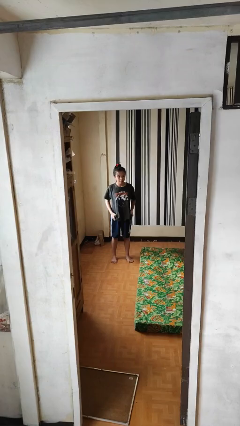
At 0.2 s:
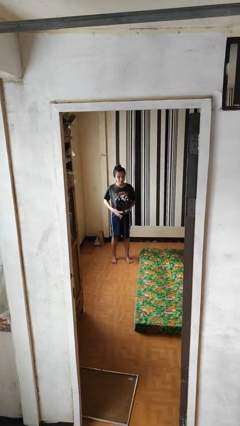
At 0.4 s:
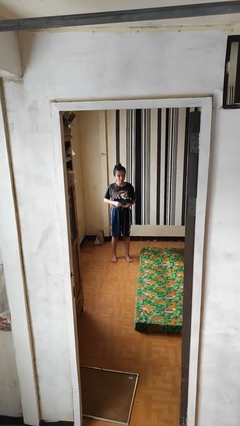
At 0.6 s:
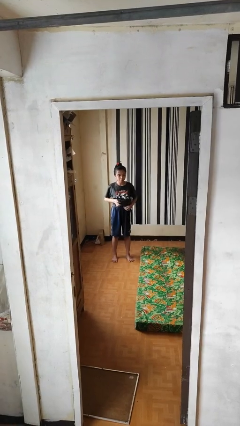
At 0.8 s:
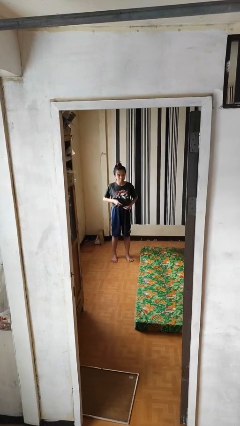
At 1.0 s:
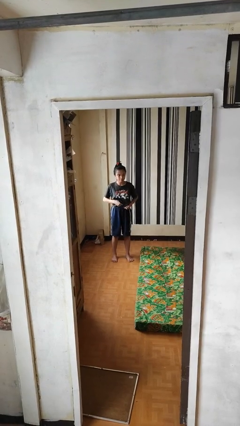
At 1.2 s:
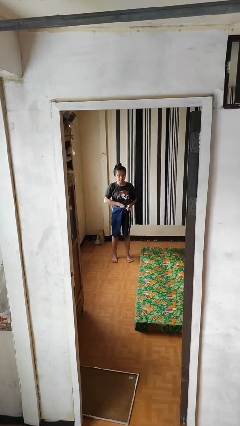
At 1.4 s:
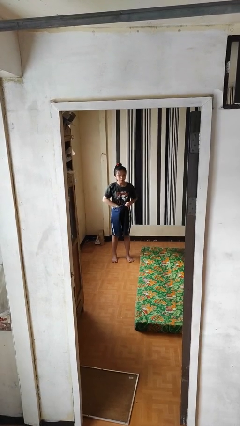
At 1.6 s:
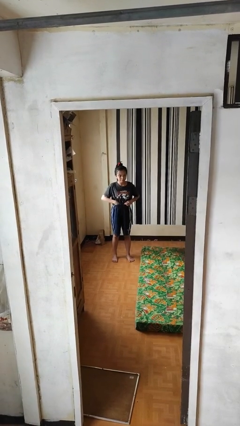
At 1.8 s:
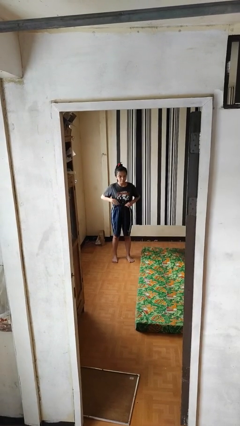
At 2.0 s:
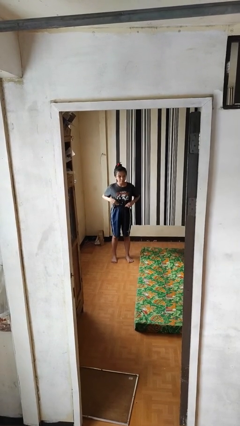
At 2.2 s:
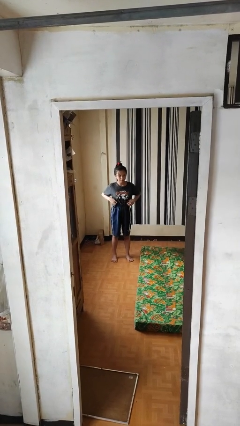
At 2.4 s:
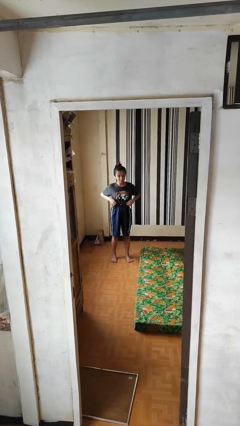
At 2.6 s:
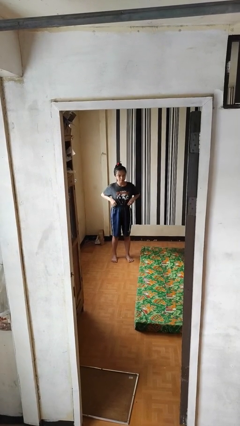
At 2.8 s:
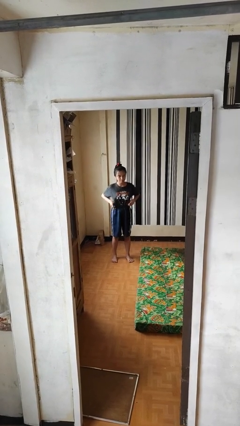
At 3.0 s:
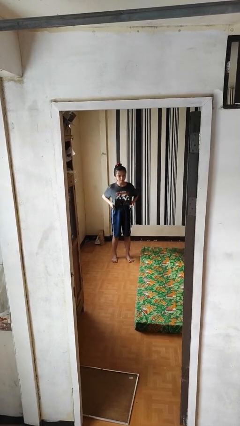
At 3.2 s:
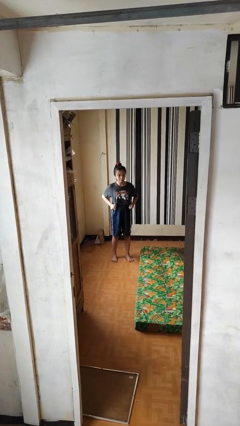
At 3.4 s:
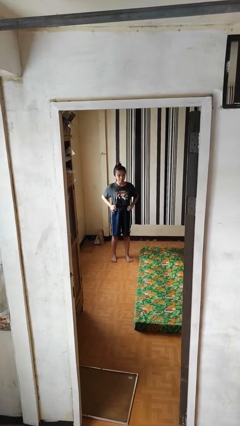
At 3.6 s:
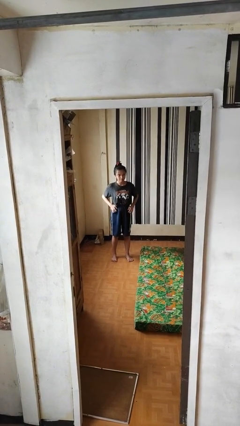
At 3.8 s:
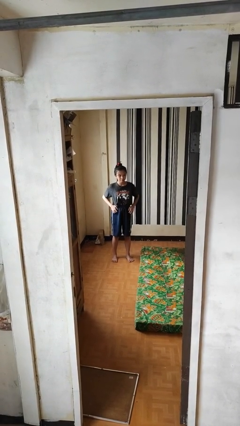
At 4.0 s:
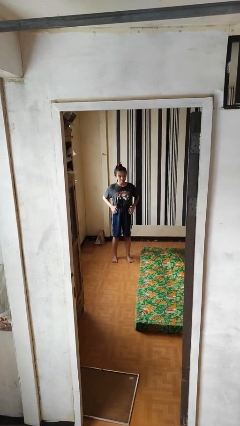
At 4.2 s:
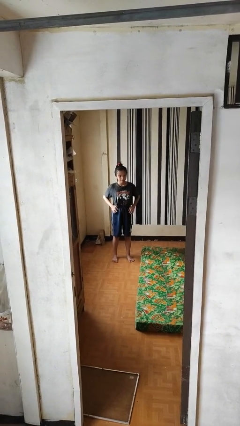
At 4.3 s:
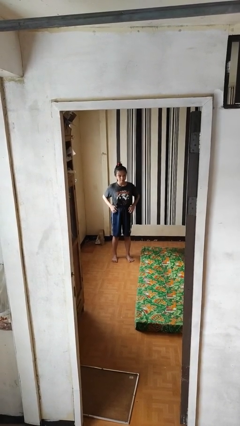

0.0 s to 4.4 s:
person tucks in shirt

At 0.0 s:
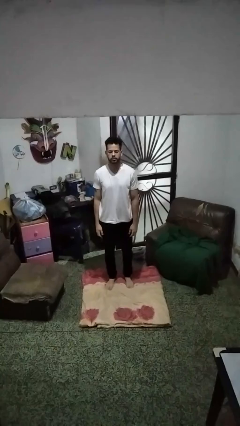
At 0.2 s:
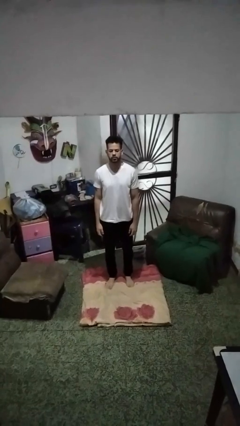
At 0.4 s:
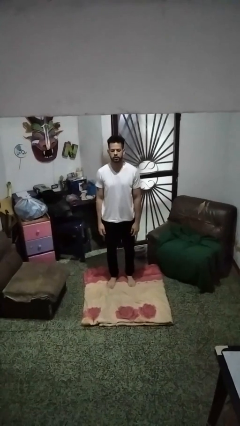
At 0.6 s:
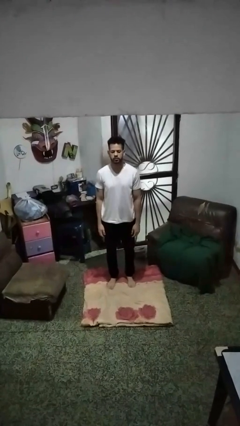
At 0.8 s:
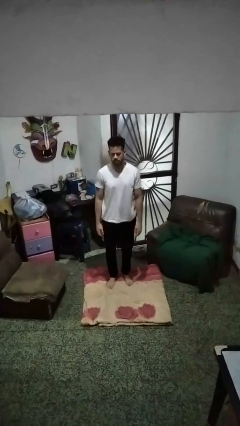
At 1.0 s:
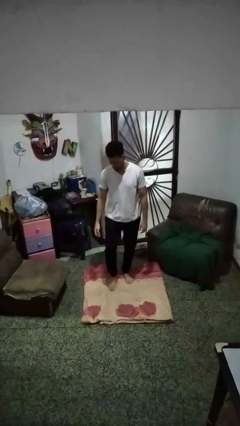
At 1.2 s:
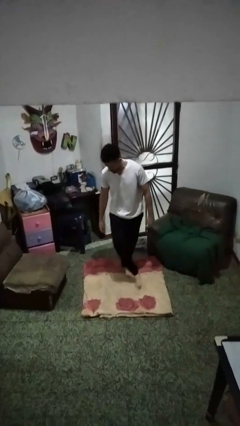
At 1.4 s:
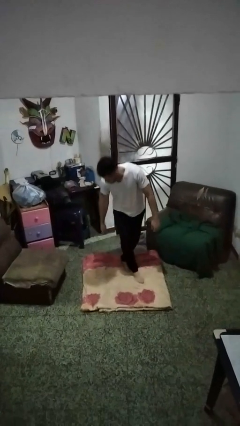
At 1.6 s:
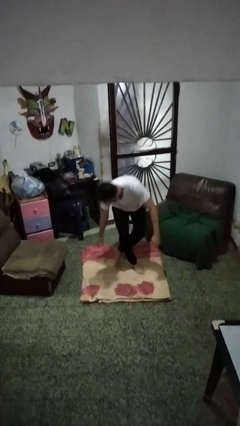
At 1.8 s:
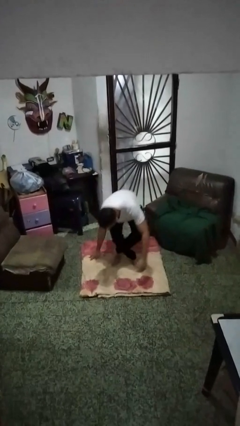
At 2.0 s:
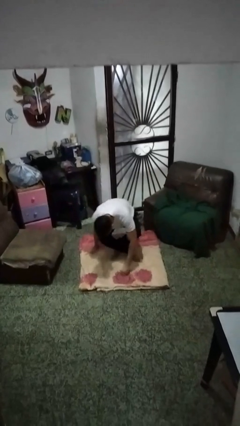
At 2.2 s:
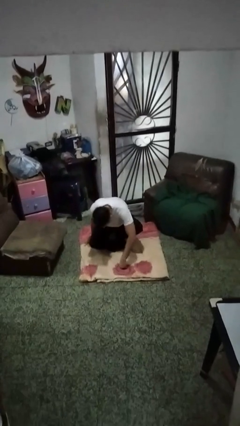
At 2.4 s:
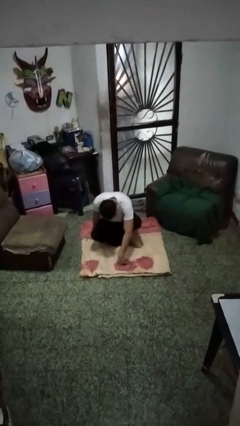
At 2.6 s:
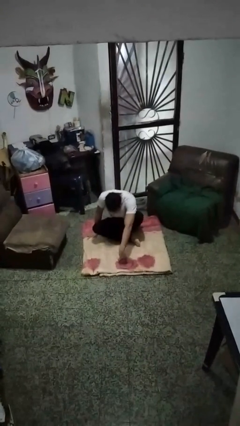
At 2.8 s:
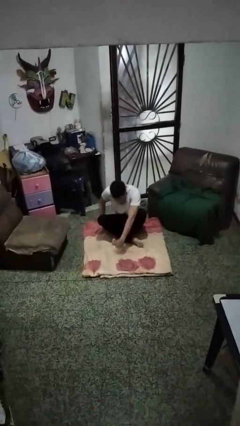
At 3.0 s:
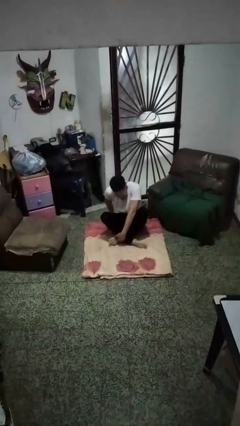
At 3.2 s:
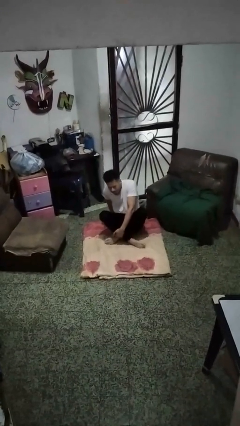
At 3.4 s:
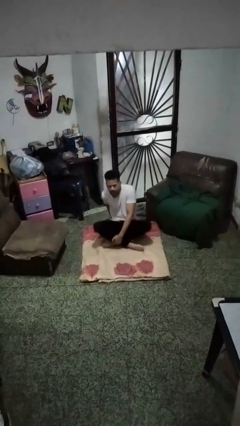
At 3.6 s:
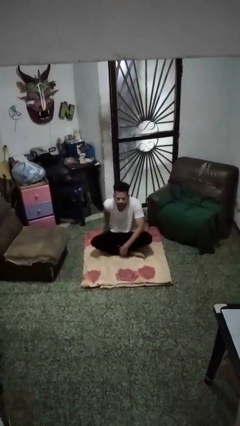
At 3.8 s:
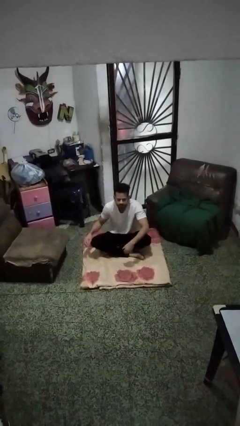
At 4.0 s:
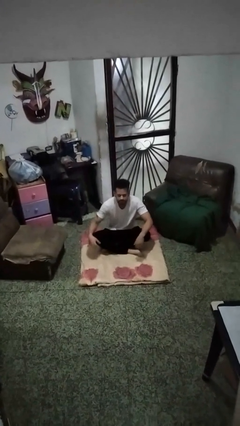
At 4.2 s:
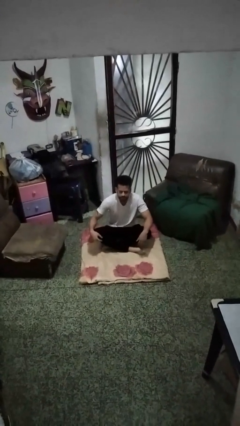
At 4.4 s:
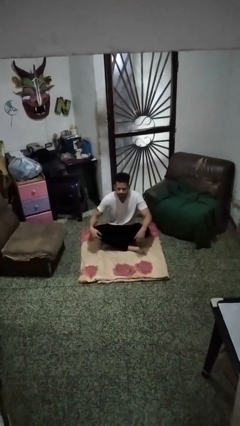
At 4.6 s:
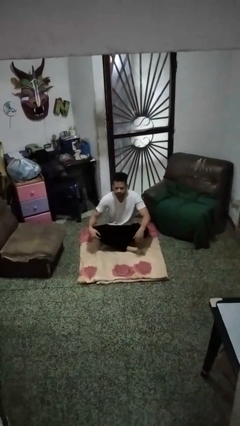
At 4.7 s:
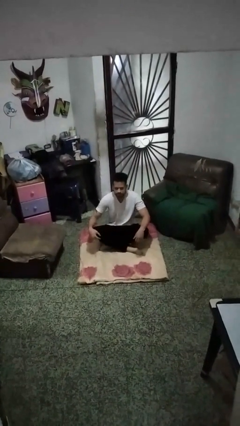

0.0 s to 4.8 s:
person sits crisscross

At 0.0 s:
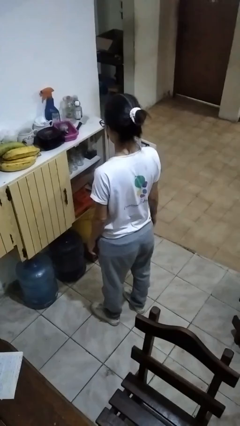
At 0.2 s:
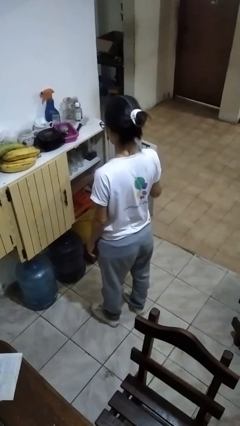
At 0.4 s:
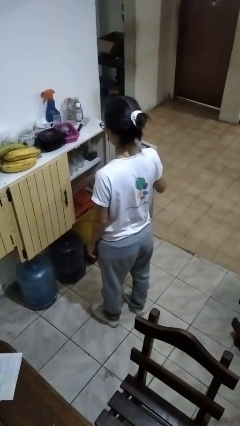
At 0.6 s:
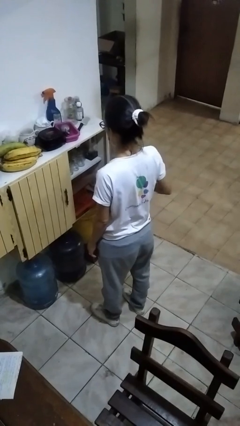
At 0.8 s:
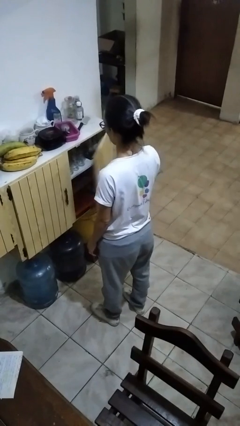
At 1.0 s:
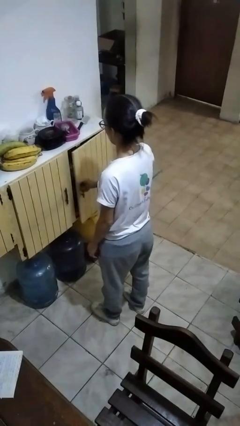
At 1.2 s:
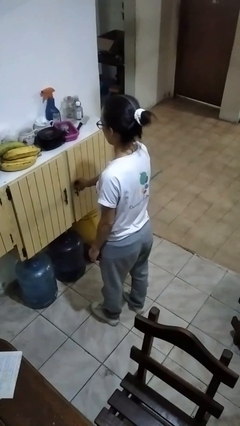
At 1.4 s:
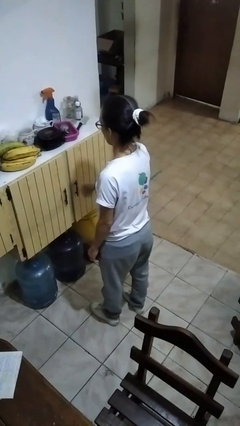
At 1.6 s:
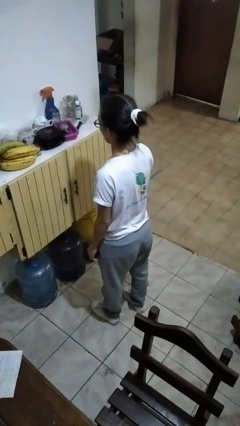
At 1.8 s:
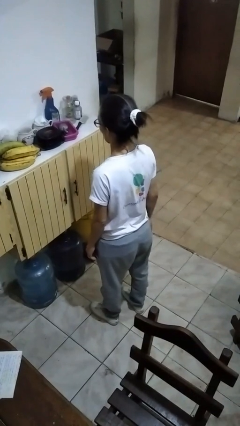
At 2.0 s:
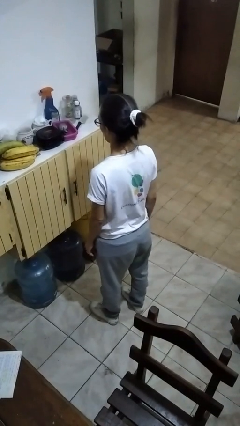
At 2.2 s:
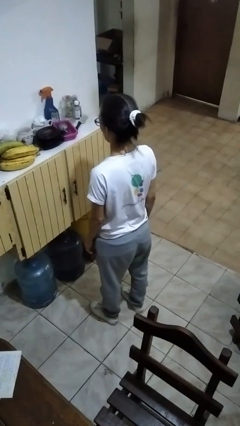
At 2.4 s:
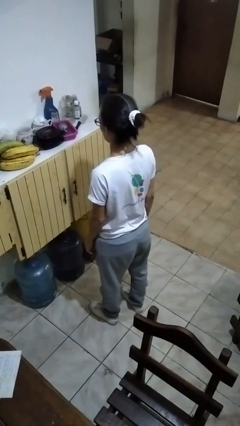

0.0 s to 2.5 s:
person closes kitchen drawer

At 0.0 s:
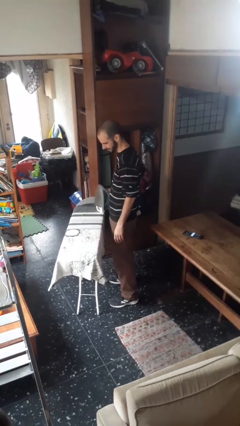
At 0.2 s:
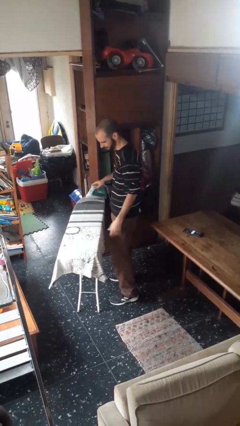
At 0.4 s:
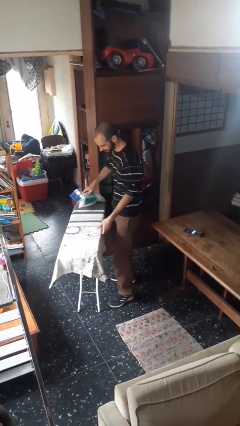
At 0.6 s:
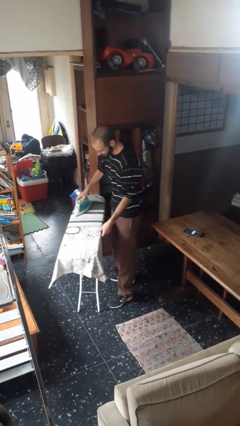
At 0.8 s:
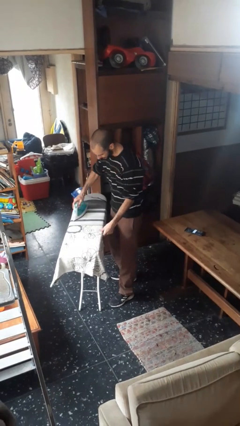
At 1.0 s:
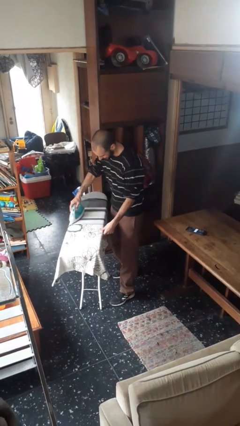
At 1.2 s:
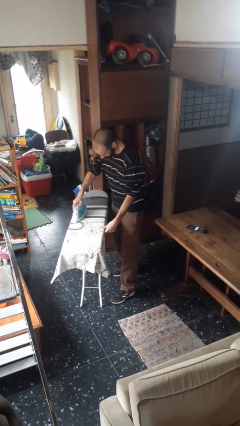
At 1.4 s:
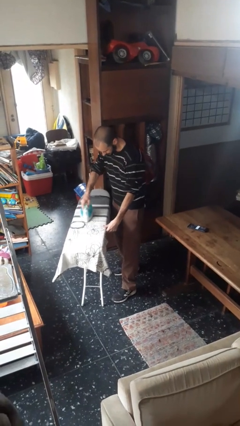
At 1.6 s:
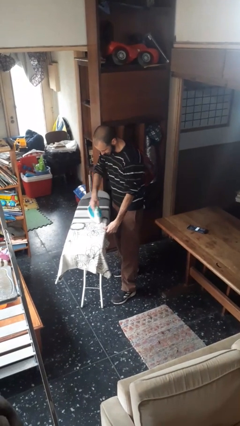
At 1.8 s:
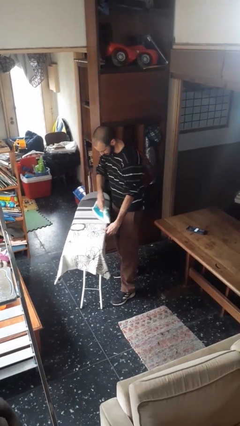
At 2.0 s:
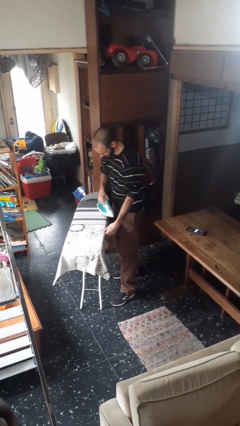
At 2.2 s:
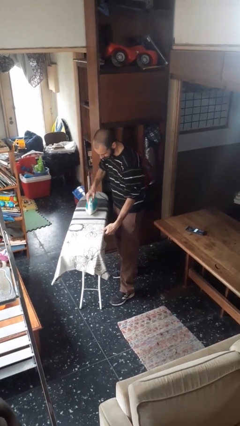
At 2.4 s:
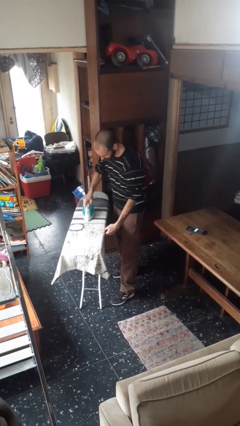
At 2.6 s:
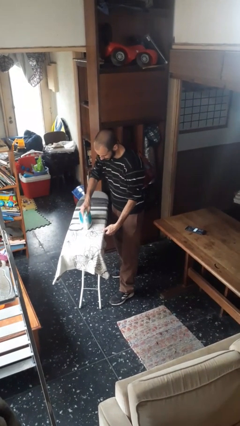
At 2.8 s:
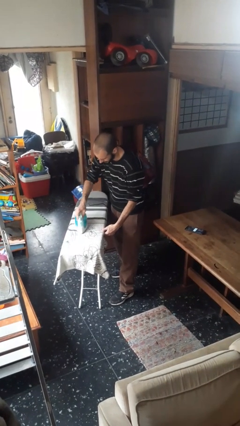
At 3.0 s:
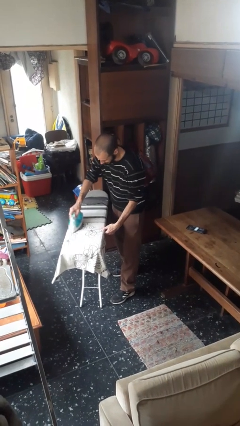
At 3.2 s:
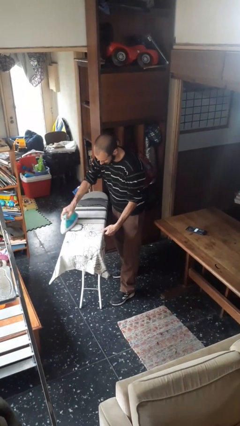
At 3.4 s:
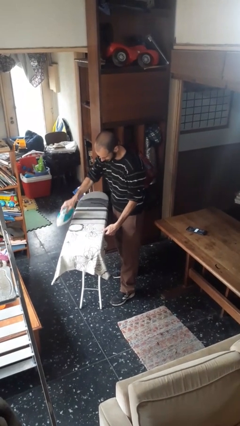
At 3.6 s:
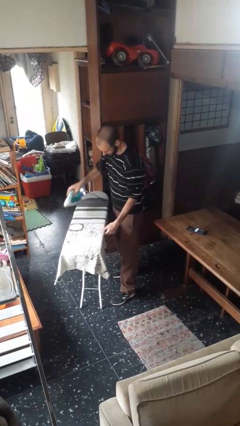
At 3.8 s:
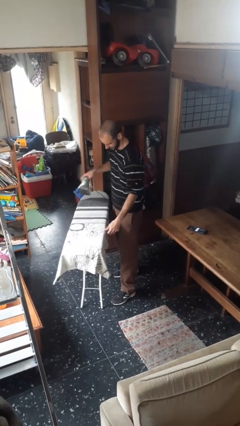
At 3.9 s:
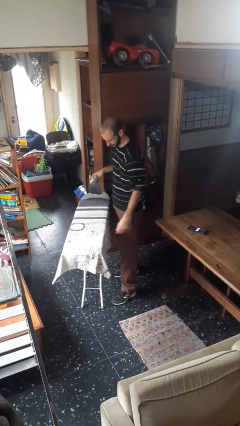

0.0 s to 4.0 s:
person irons clothes

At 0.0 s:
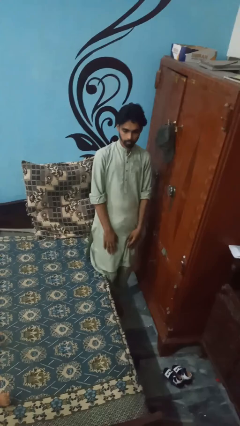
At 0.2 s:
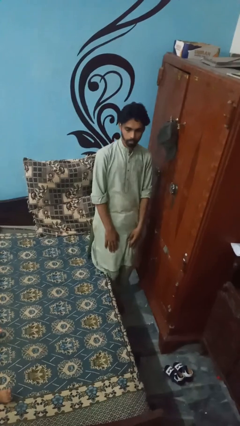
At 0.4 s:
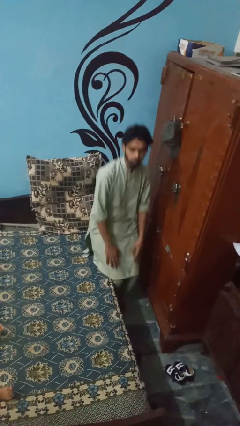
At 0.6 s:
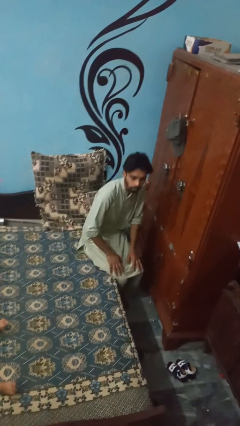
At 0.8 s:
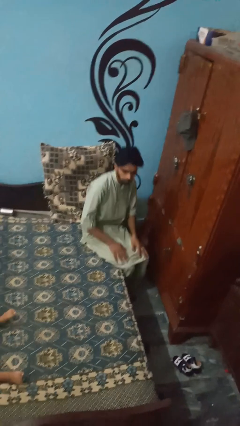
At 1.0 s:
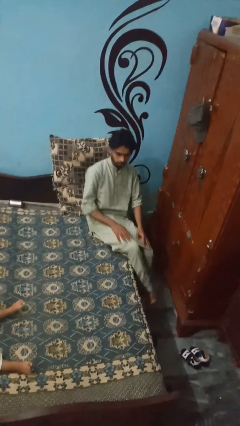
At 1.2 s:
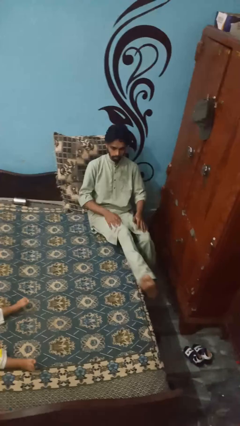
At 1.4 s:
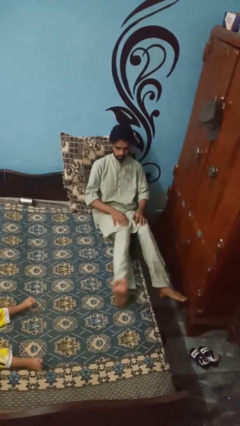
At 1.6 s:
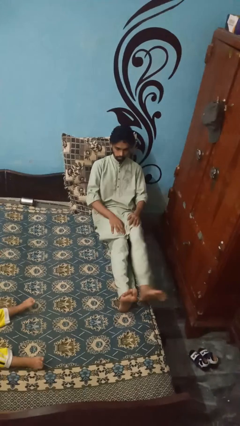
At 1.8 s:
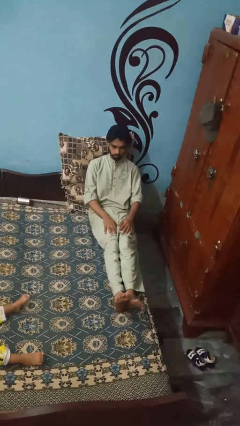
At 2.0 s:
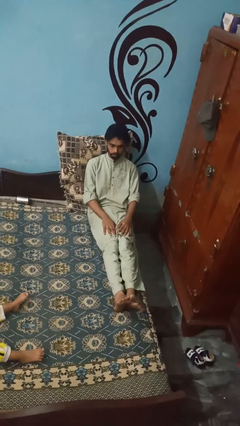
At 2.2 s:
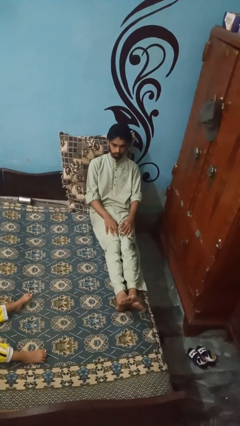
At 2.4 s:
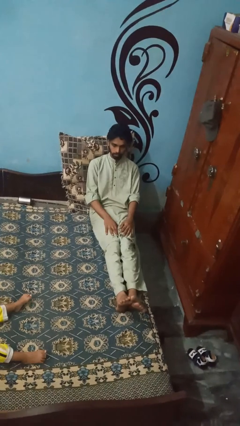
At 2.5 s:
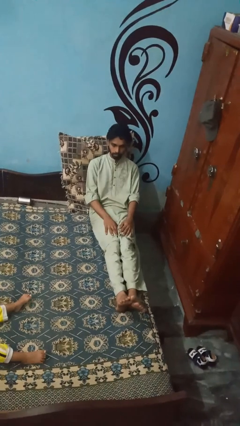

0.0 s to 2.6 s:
person lies down on bed
